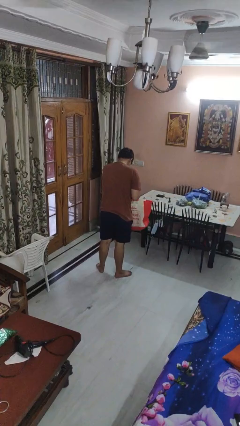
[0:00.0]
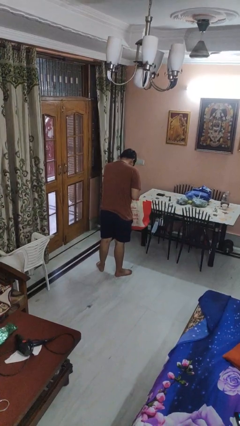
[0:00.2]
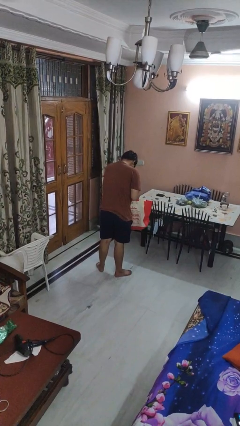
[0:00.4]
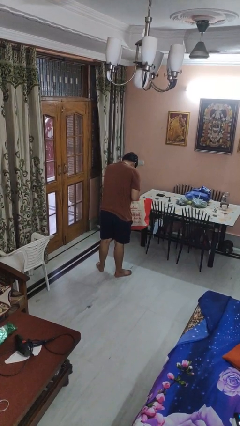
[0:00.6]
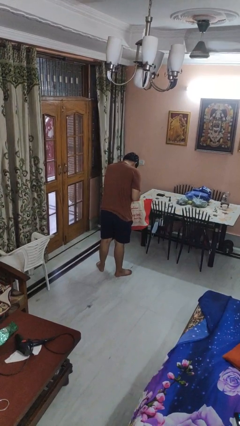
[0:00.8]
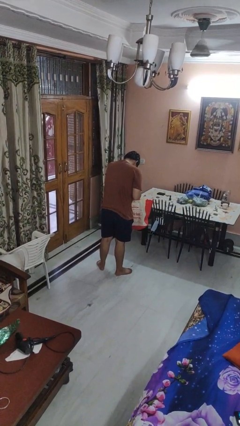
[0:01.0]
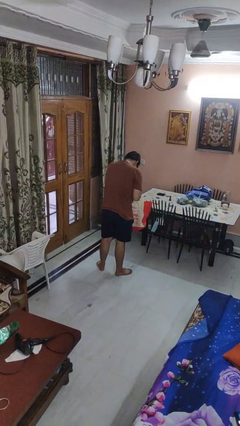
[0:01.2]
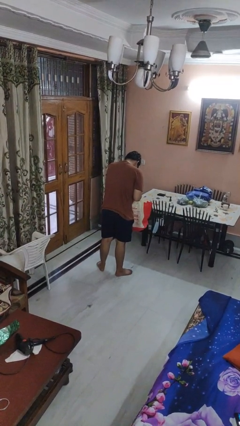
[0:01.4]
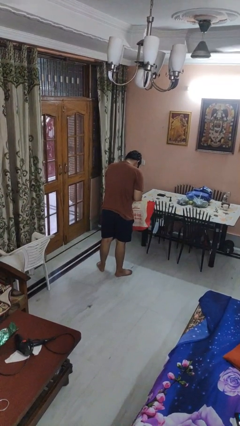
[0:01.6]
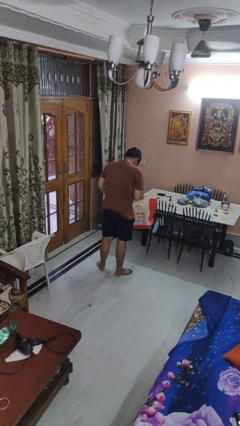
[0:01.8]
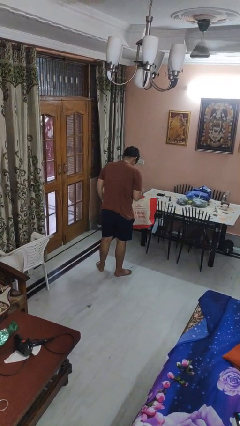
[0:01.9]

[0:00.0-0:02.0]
person searches in bag

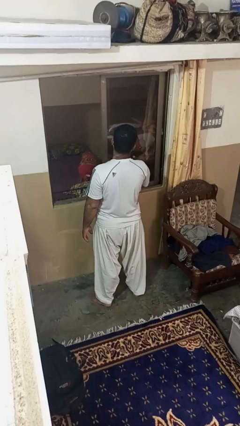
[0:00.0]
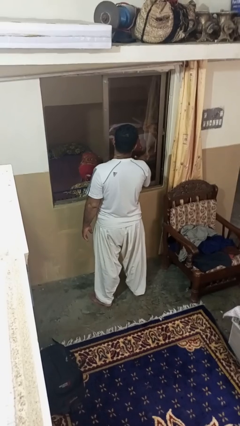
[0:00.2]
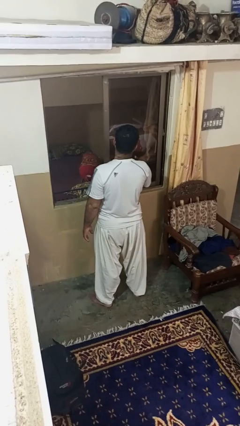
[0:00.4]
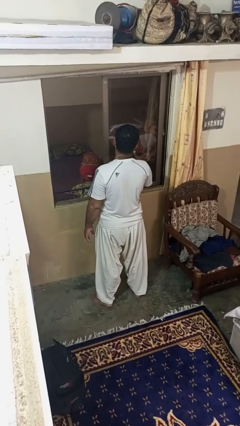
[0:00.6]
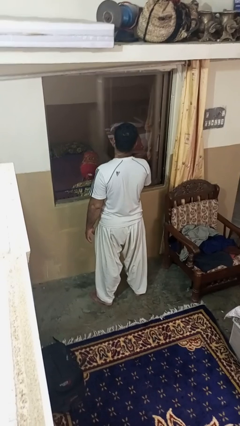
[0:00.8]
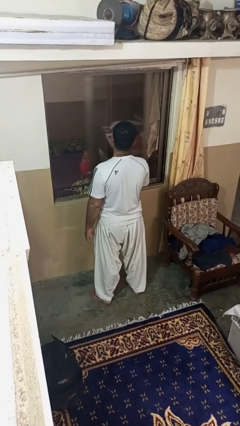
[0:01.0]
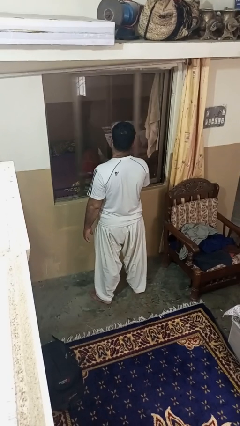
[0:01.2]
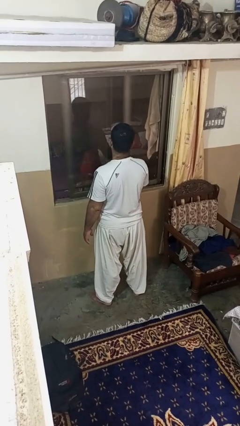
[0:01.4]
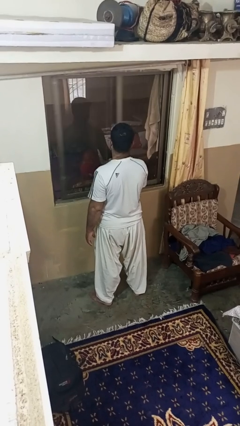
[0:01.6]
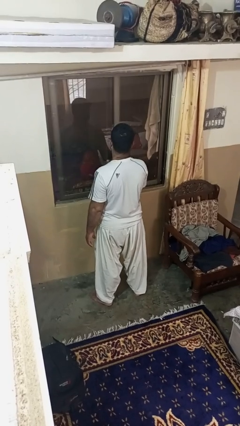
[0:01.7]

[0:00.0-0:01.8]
person closes home window

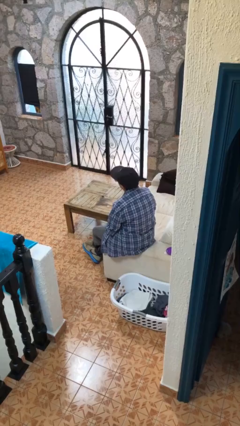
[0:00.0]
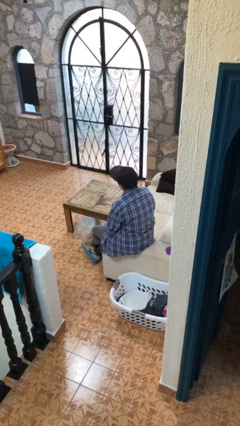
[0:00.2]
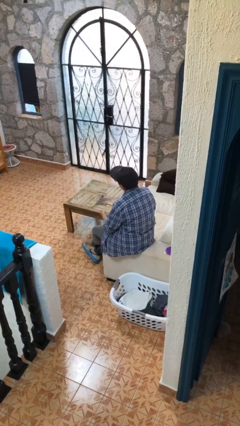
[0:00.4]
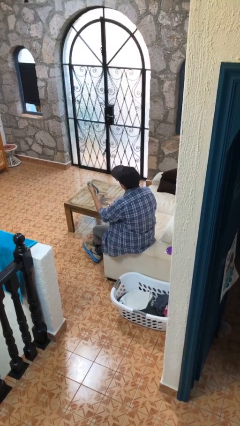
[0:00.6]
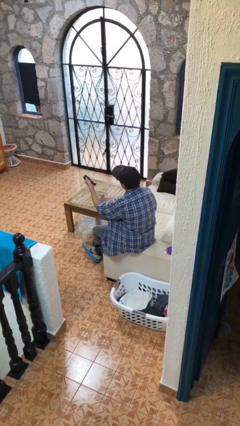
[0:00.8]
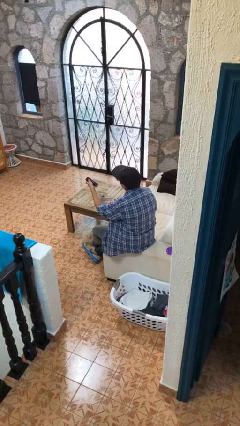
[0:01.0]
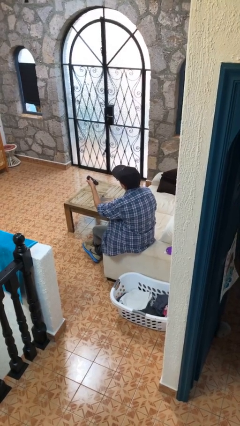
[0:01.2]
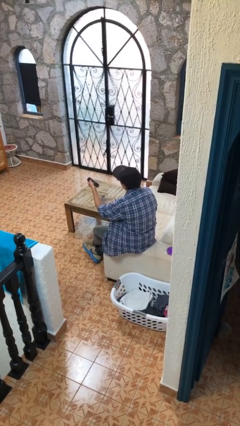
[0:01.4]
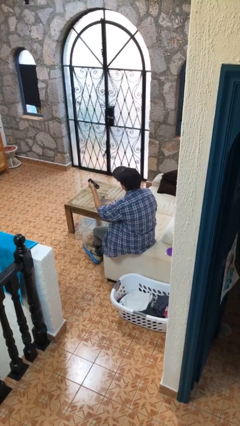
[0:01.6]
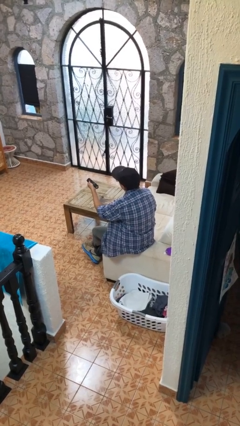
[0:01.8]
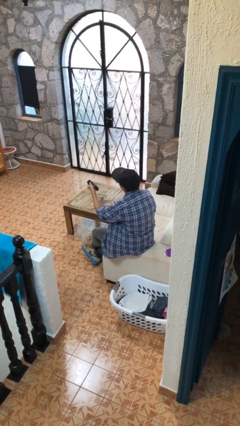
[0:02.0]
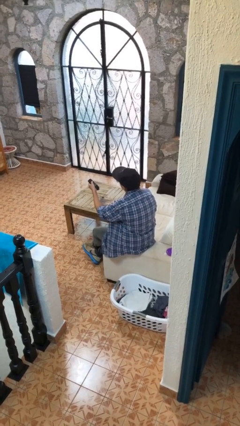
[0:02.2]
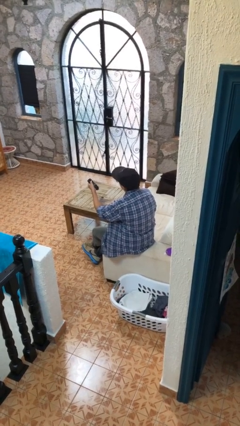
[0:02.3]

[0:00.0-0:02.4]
person uses television remote

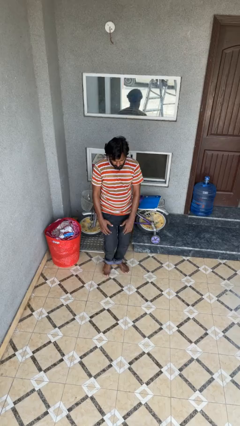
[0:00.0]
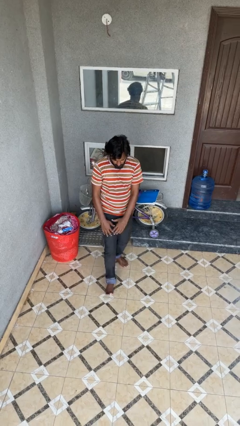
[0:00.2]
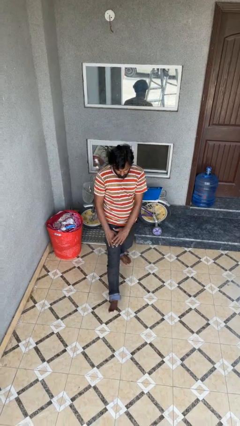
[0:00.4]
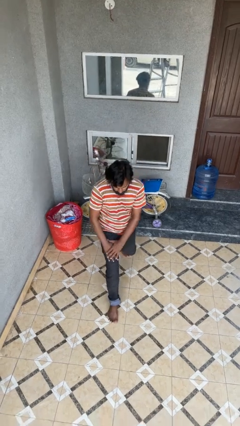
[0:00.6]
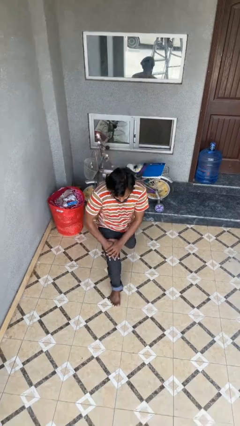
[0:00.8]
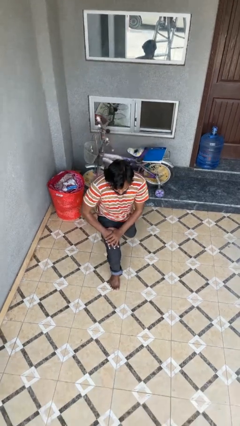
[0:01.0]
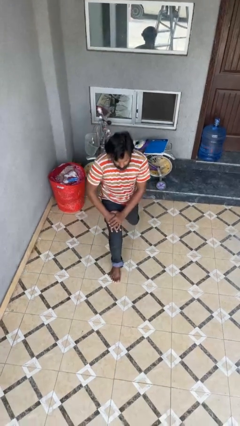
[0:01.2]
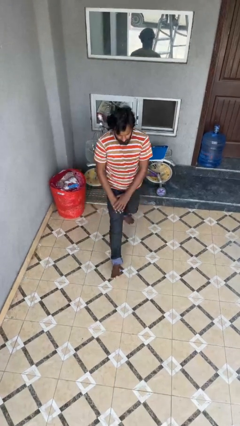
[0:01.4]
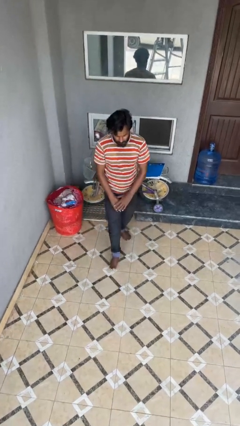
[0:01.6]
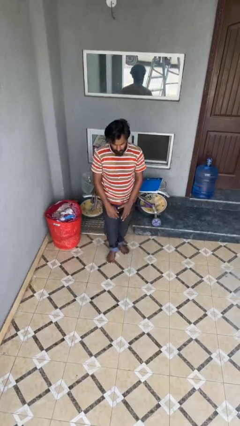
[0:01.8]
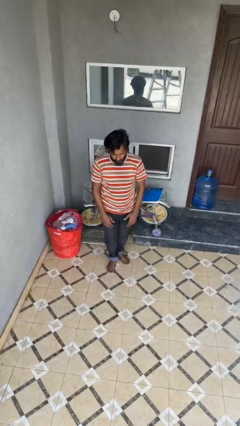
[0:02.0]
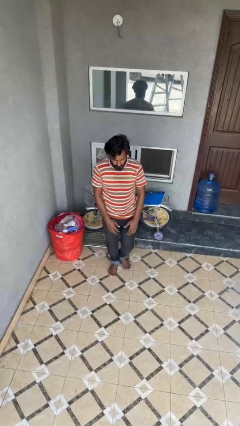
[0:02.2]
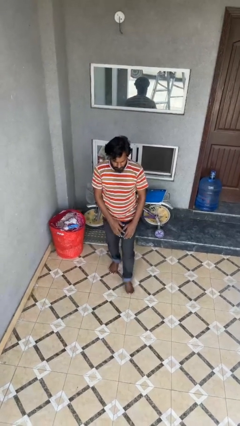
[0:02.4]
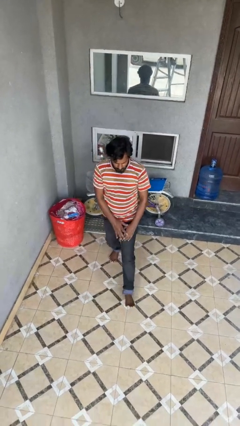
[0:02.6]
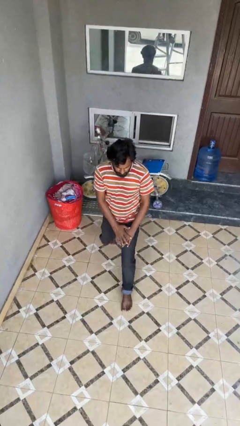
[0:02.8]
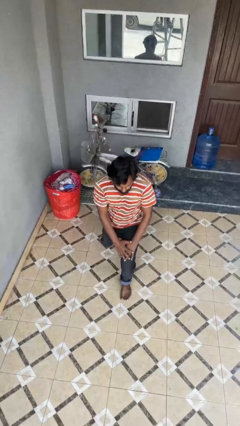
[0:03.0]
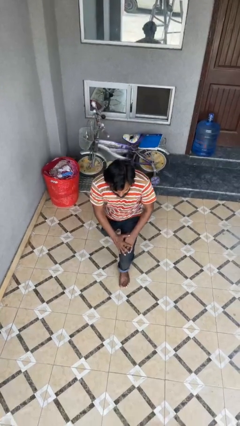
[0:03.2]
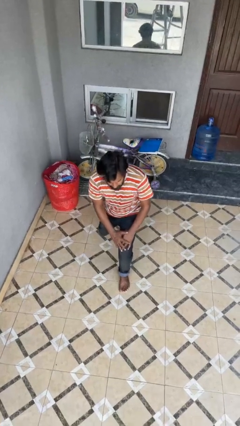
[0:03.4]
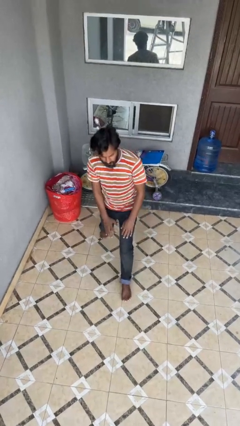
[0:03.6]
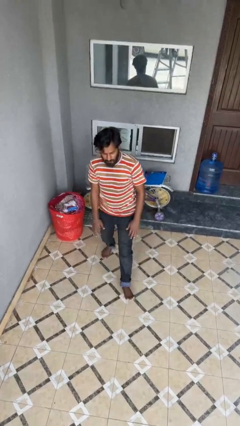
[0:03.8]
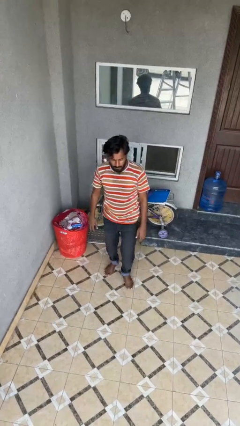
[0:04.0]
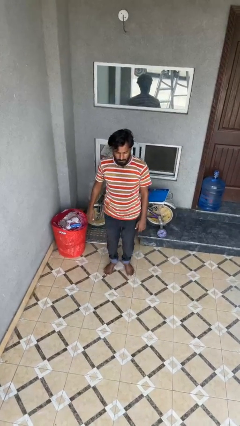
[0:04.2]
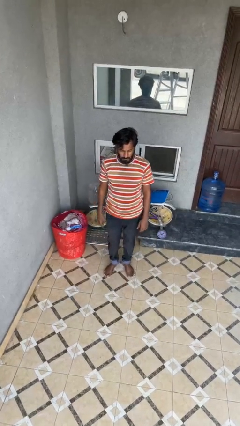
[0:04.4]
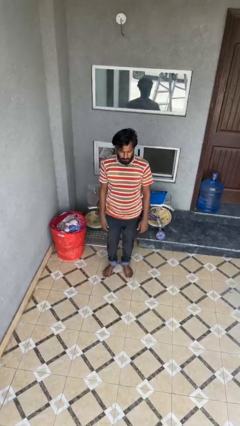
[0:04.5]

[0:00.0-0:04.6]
person exercises with lunges

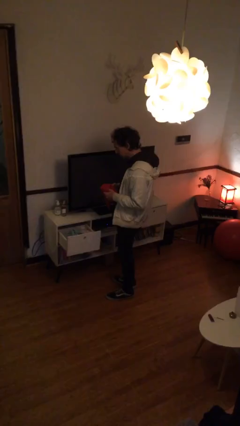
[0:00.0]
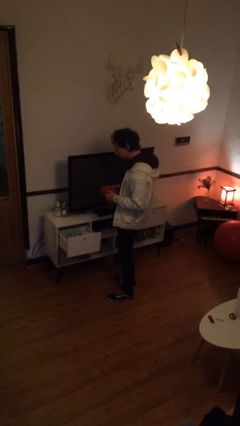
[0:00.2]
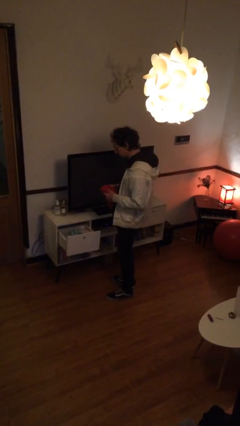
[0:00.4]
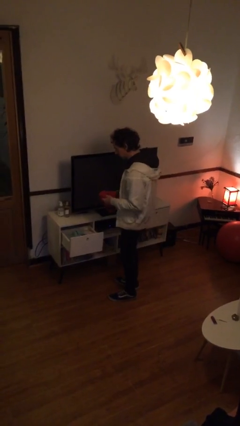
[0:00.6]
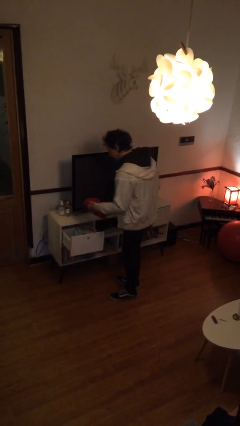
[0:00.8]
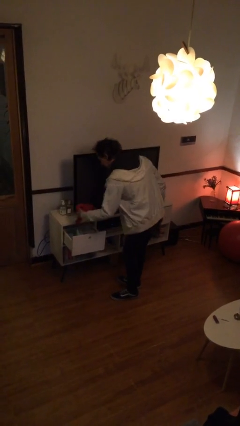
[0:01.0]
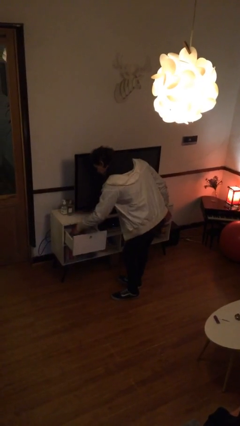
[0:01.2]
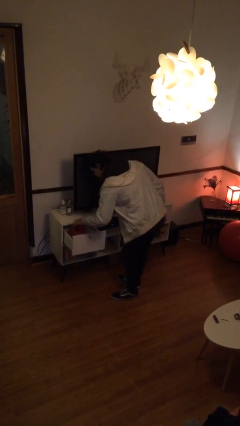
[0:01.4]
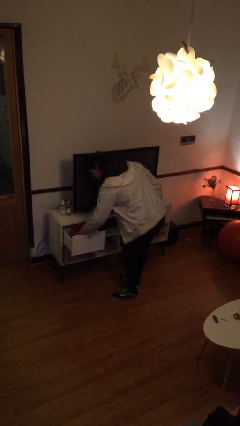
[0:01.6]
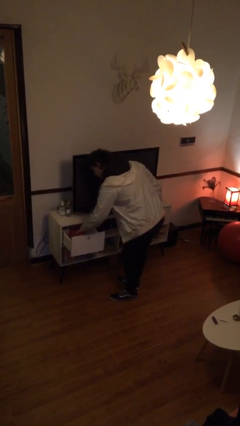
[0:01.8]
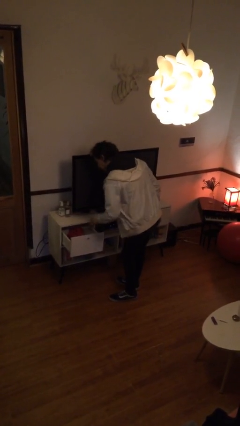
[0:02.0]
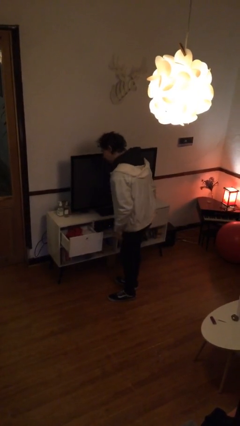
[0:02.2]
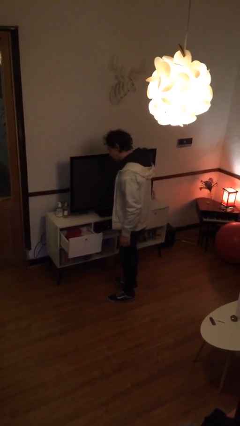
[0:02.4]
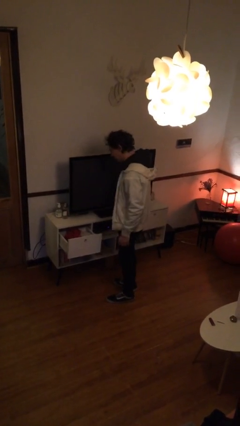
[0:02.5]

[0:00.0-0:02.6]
person puts clothes into dresser

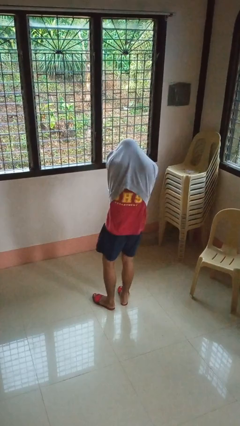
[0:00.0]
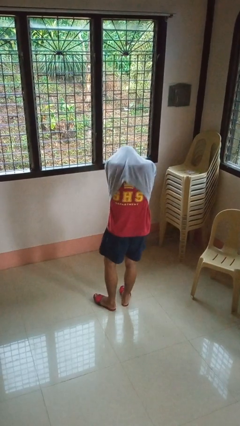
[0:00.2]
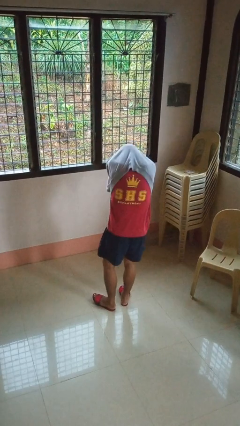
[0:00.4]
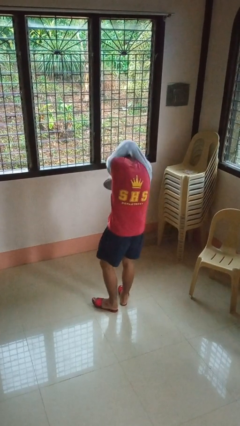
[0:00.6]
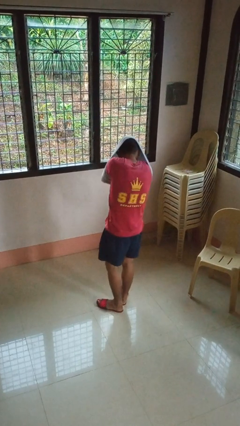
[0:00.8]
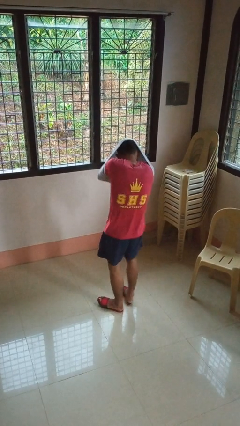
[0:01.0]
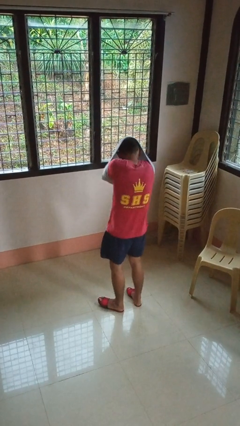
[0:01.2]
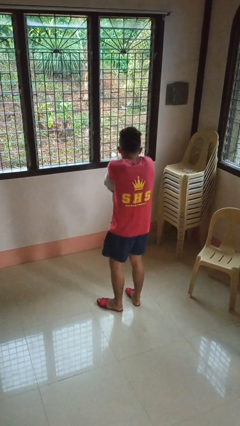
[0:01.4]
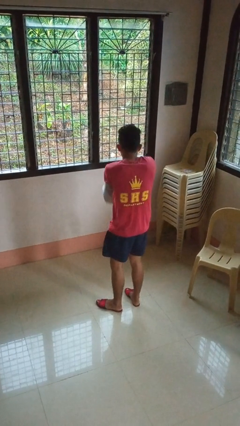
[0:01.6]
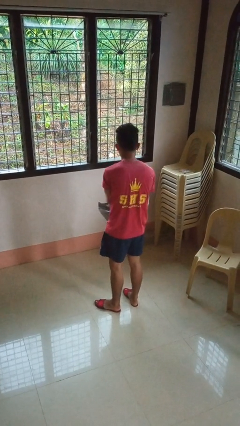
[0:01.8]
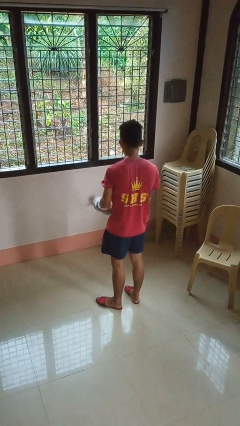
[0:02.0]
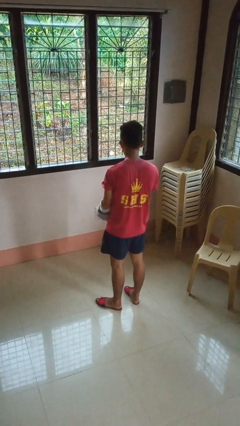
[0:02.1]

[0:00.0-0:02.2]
person takes off hoodie

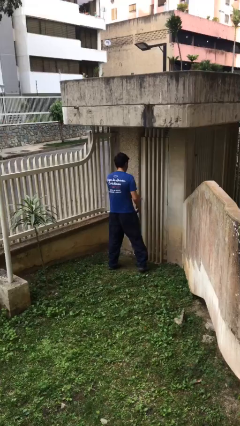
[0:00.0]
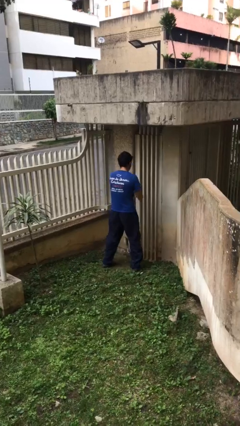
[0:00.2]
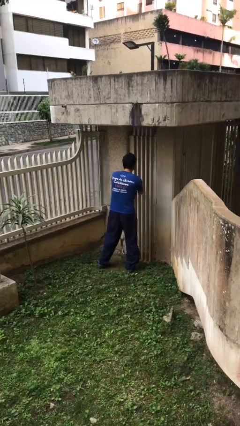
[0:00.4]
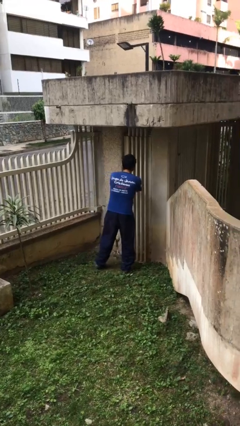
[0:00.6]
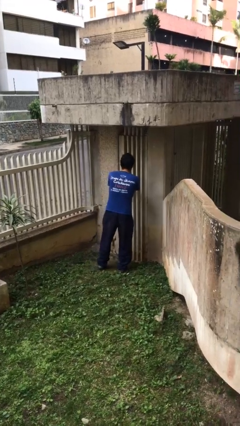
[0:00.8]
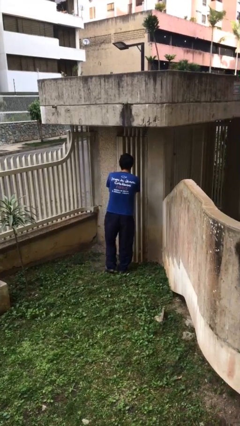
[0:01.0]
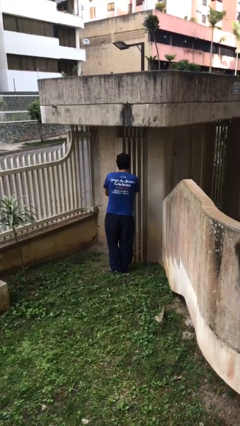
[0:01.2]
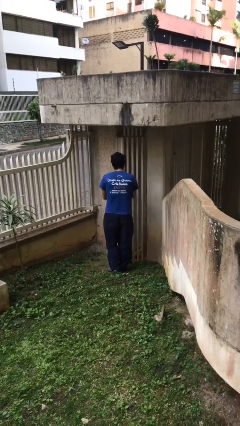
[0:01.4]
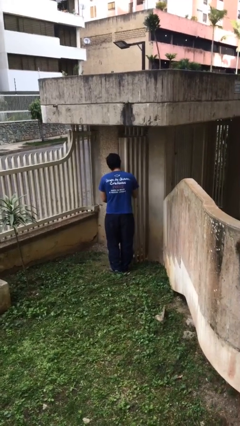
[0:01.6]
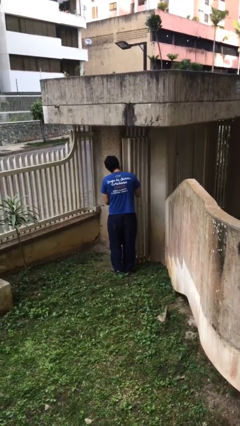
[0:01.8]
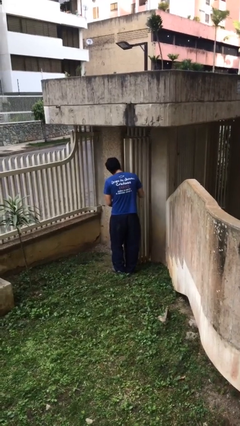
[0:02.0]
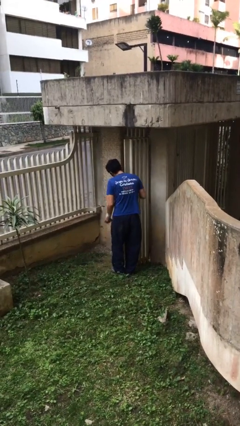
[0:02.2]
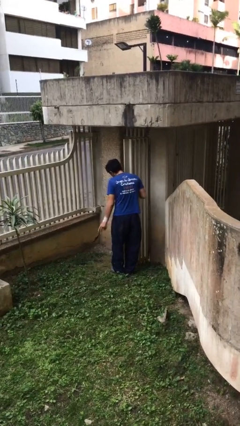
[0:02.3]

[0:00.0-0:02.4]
person opens facility door
